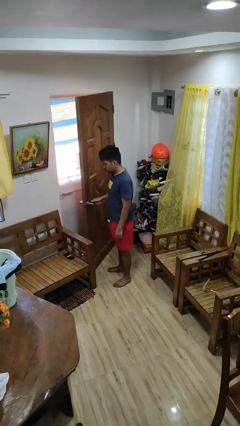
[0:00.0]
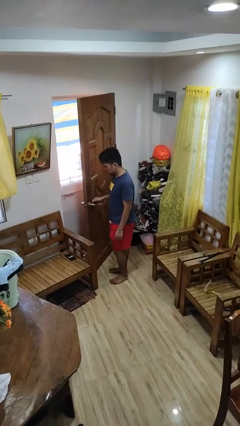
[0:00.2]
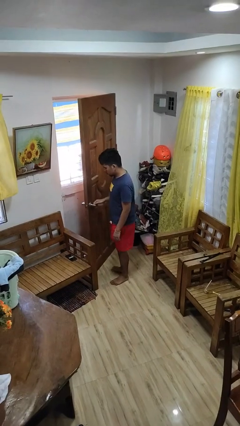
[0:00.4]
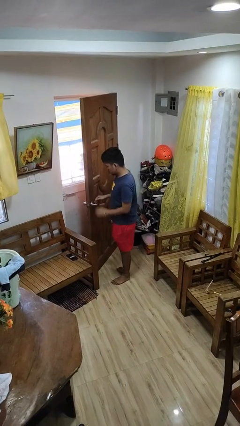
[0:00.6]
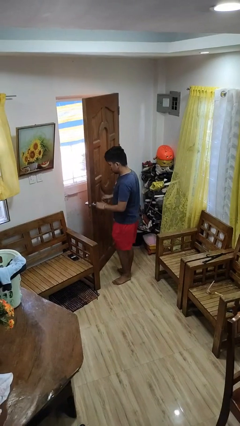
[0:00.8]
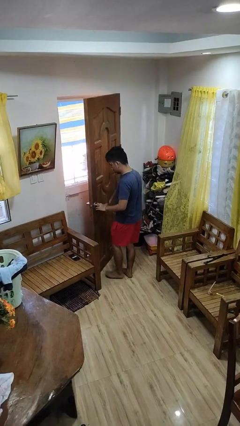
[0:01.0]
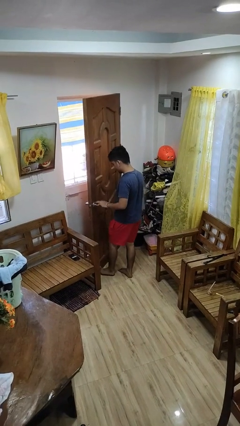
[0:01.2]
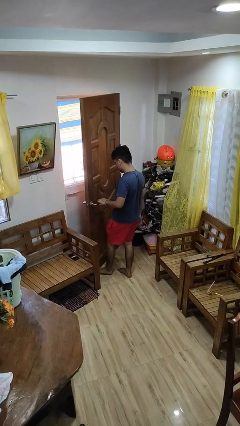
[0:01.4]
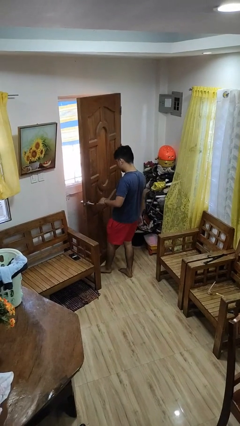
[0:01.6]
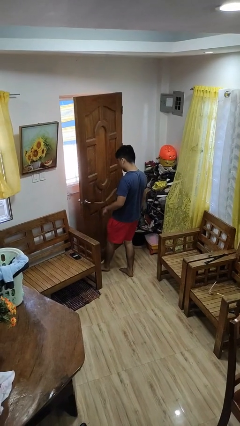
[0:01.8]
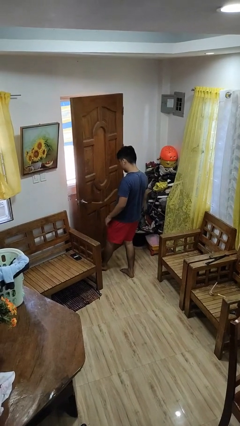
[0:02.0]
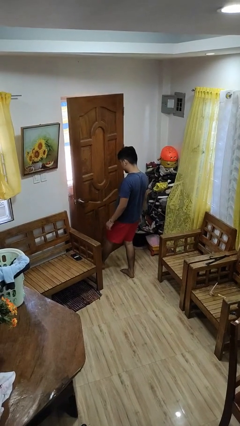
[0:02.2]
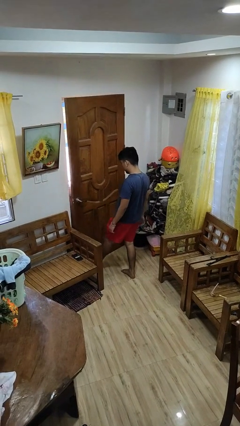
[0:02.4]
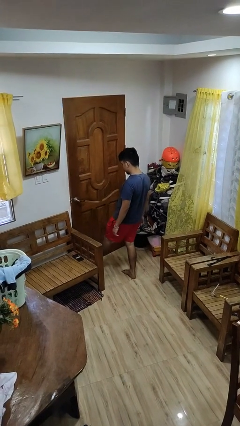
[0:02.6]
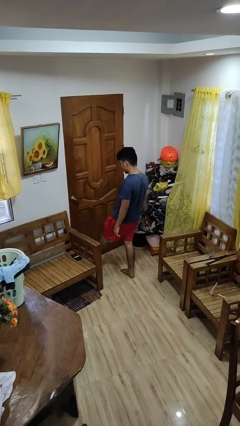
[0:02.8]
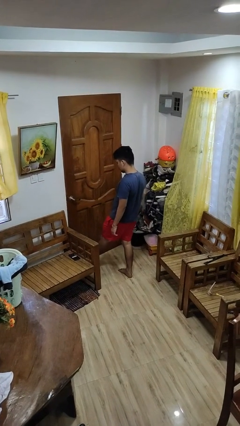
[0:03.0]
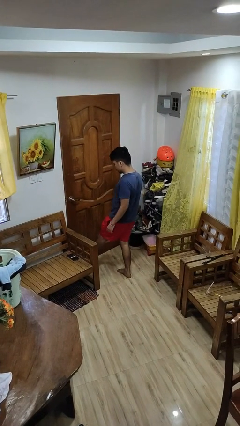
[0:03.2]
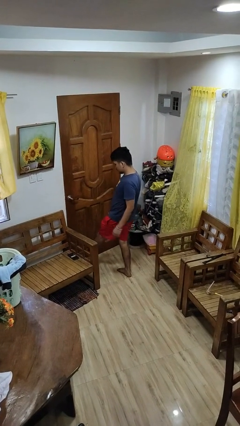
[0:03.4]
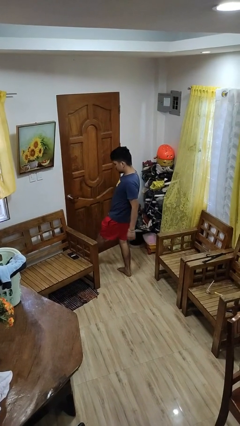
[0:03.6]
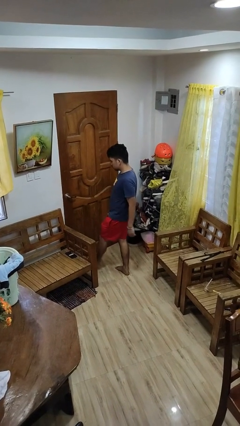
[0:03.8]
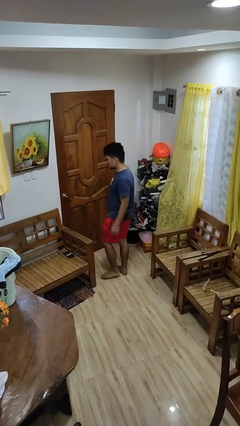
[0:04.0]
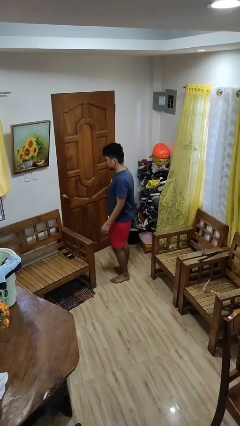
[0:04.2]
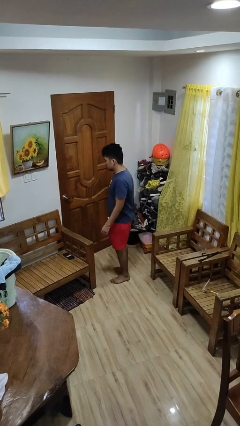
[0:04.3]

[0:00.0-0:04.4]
person closes door with foot

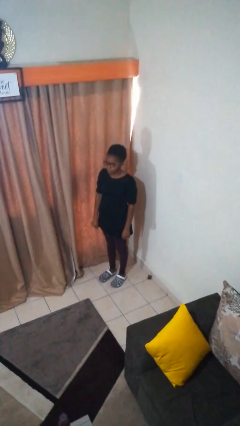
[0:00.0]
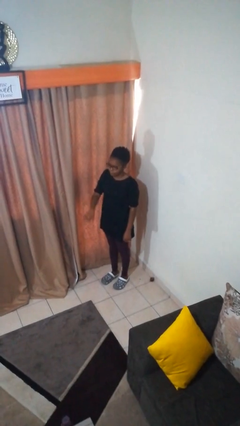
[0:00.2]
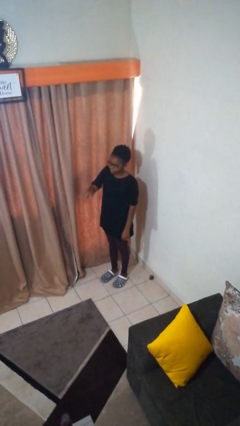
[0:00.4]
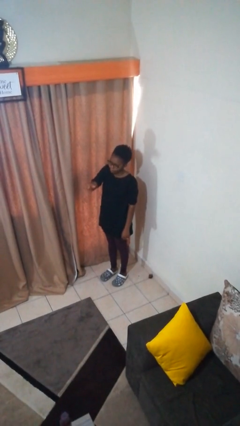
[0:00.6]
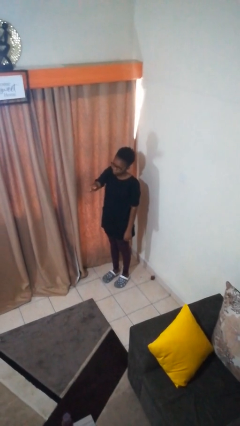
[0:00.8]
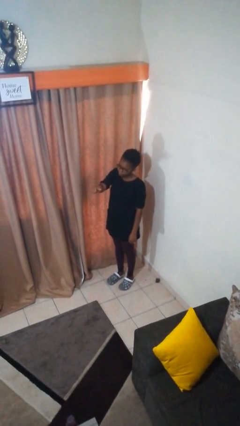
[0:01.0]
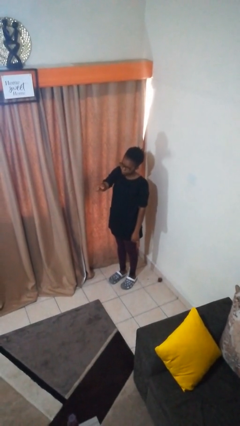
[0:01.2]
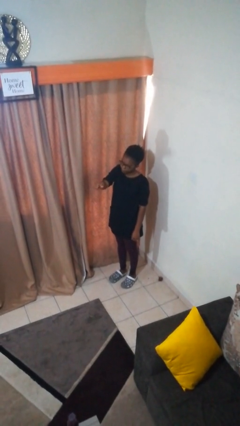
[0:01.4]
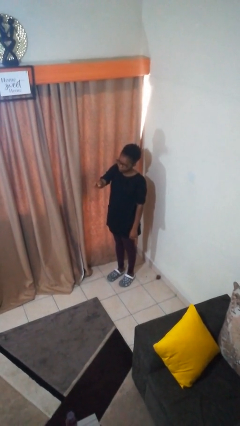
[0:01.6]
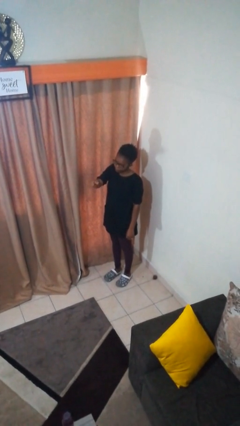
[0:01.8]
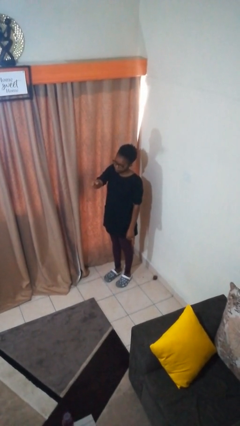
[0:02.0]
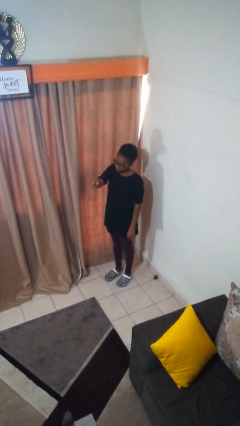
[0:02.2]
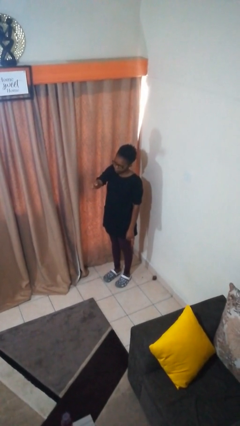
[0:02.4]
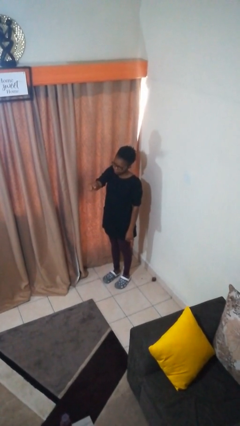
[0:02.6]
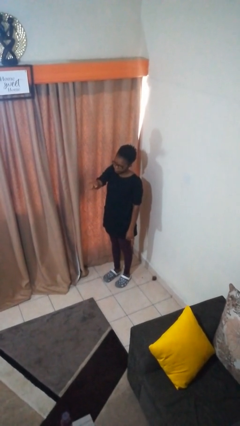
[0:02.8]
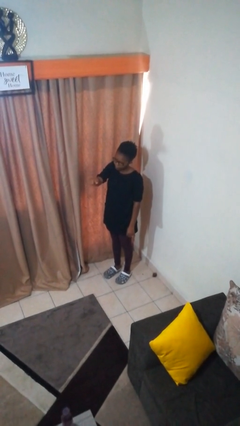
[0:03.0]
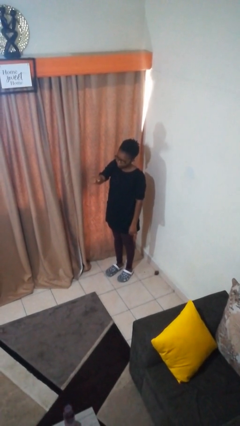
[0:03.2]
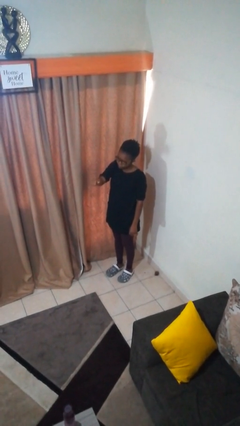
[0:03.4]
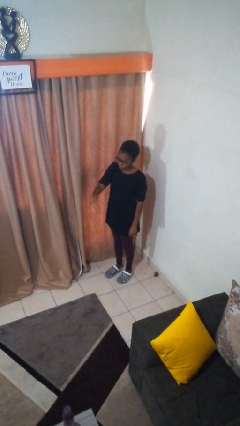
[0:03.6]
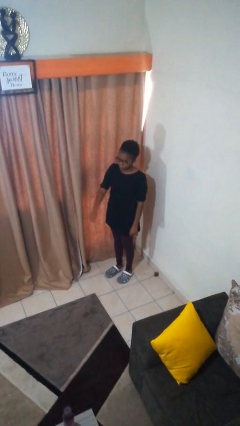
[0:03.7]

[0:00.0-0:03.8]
person gestures hang loose

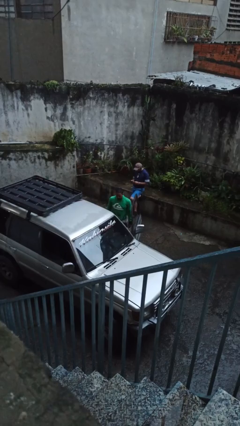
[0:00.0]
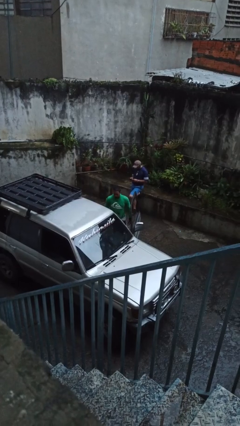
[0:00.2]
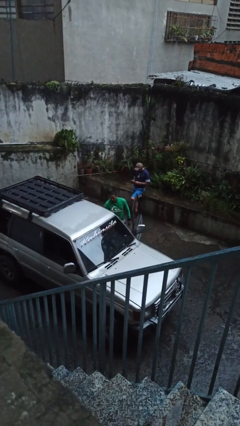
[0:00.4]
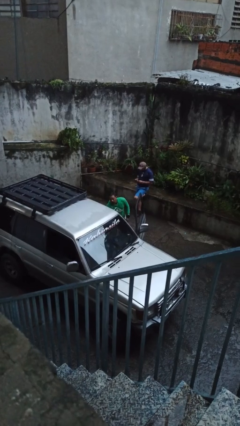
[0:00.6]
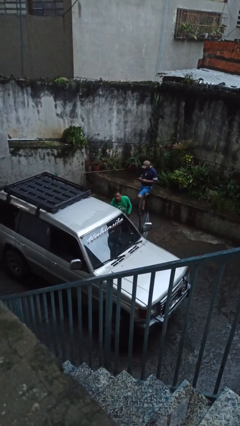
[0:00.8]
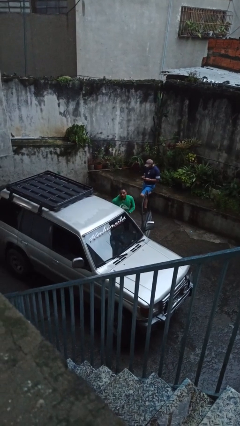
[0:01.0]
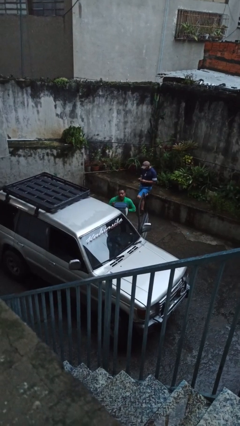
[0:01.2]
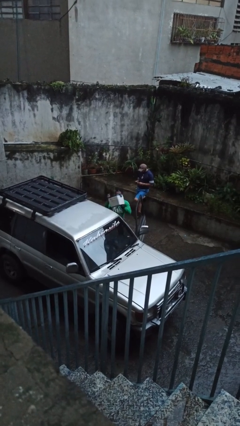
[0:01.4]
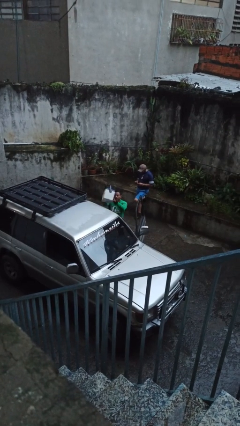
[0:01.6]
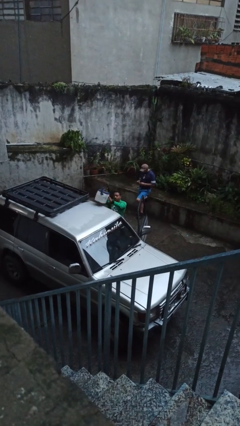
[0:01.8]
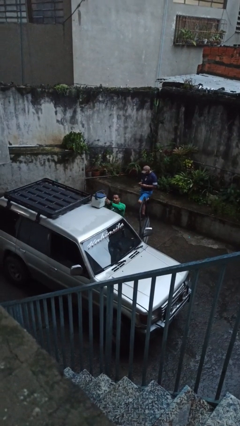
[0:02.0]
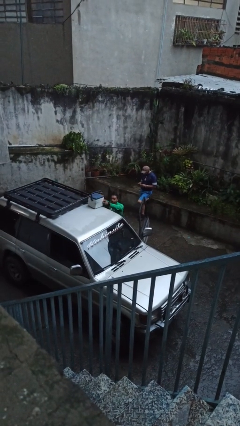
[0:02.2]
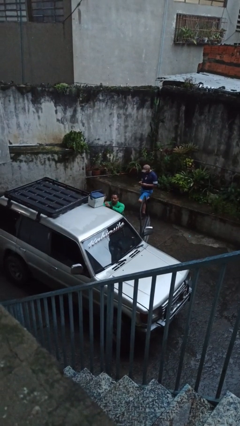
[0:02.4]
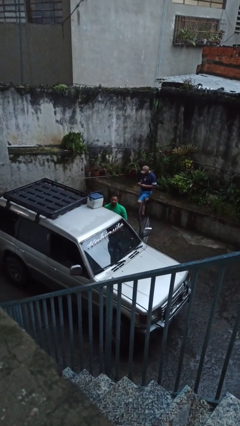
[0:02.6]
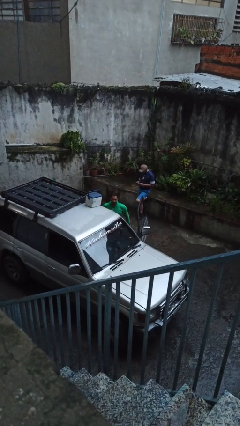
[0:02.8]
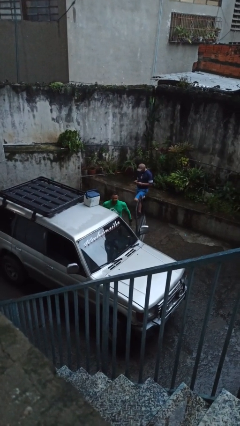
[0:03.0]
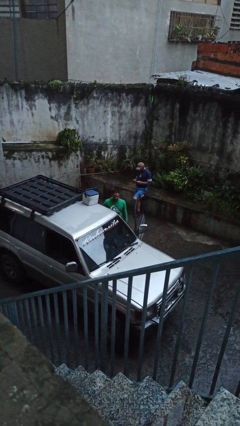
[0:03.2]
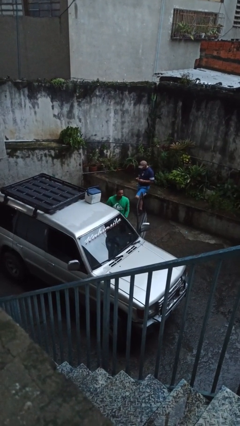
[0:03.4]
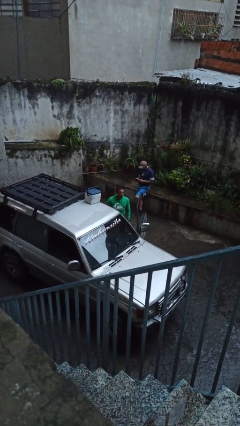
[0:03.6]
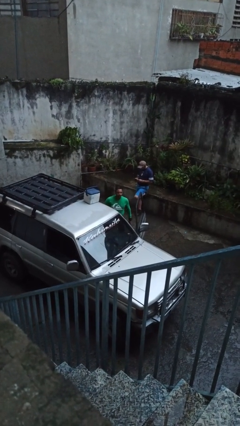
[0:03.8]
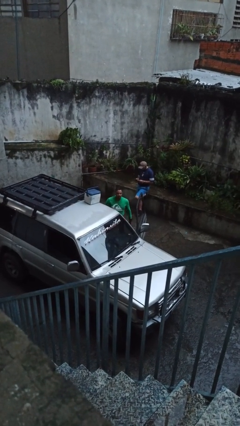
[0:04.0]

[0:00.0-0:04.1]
person unloads car

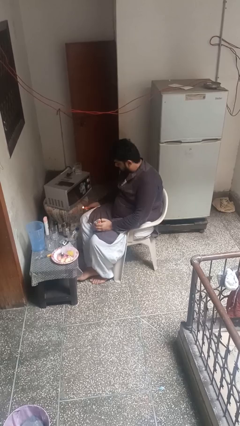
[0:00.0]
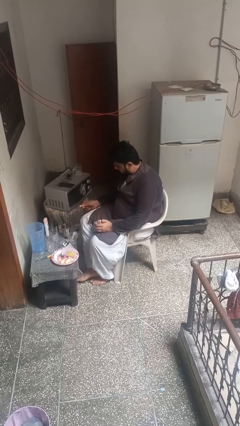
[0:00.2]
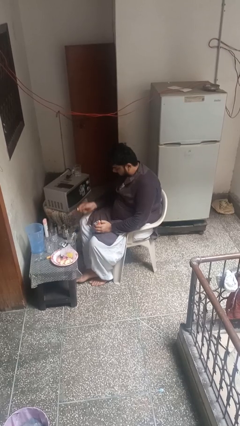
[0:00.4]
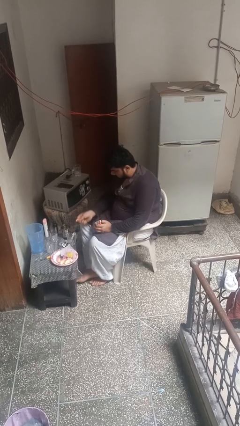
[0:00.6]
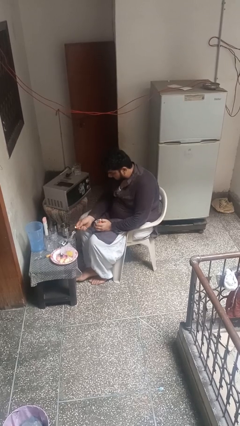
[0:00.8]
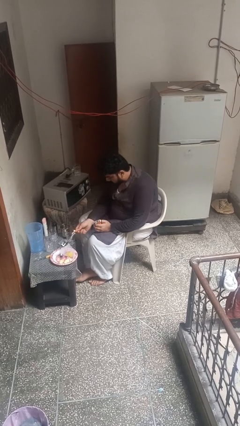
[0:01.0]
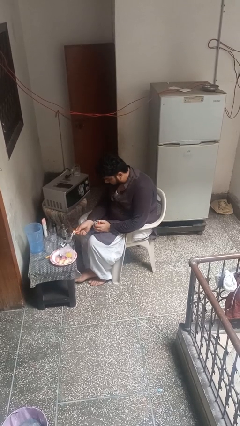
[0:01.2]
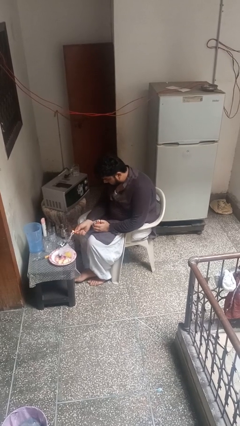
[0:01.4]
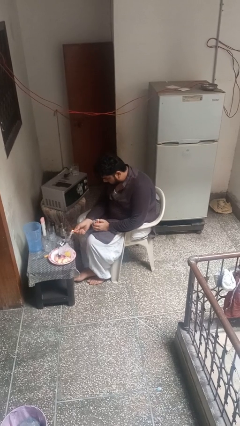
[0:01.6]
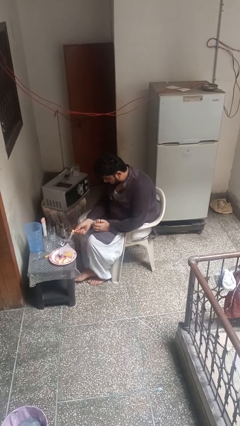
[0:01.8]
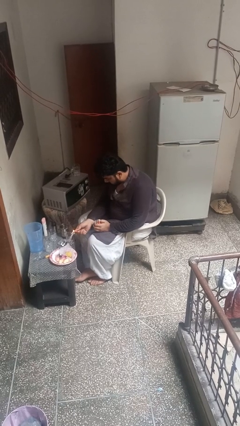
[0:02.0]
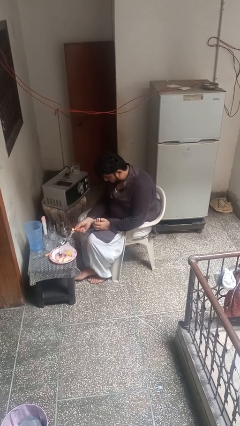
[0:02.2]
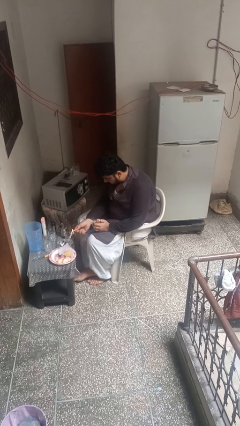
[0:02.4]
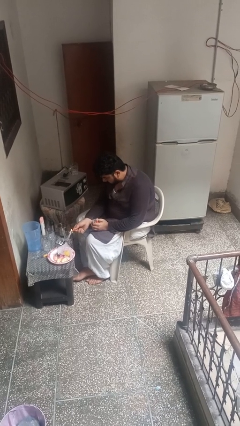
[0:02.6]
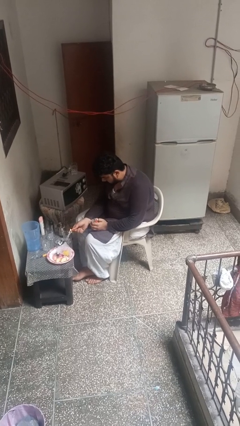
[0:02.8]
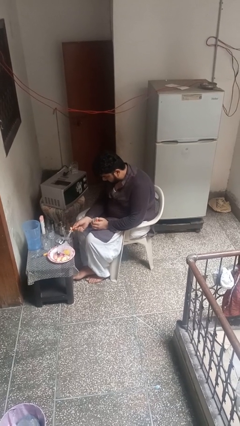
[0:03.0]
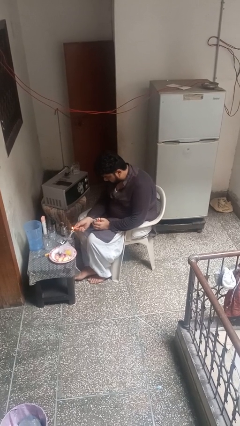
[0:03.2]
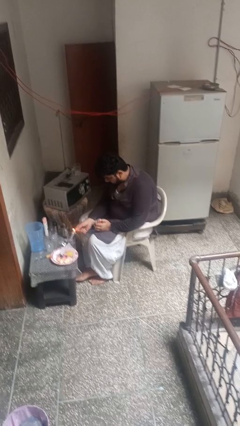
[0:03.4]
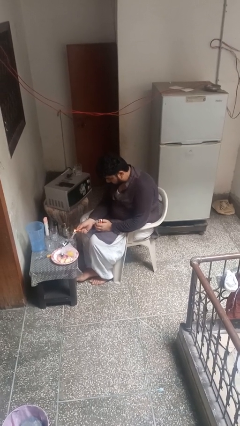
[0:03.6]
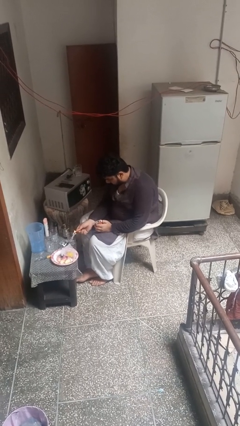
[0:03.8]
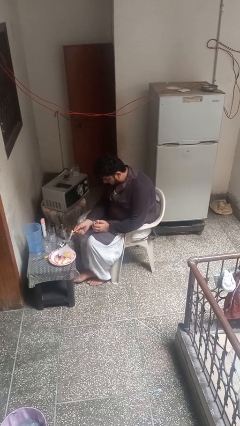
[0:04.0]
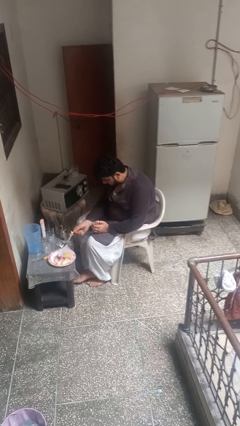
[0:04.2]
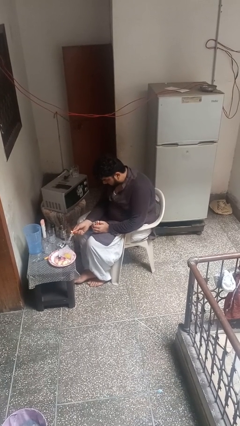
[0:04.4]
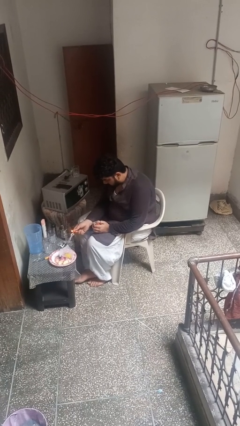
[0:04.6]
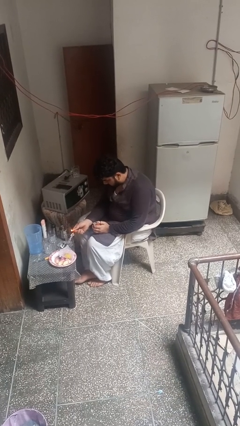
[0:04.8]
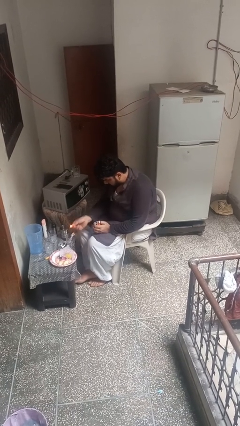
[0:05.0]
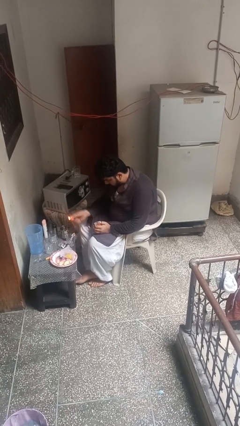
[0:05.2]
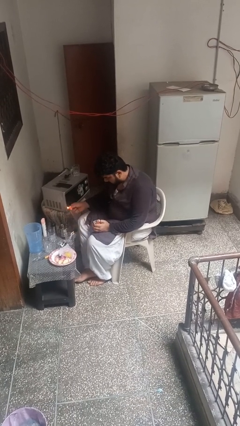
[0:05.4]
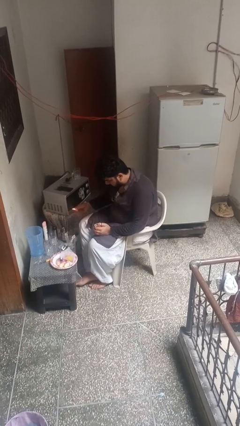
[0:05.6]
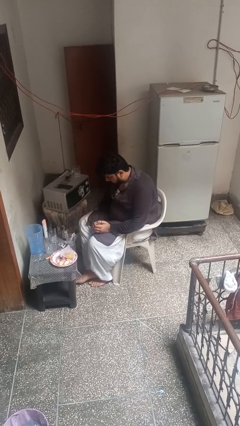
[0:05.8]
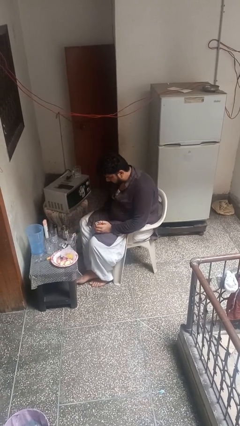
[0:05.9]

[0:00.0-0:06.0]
person lights candle
